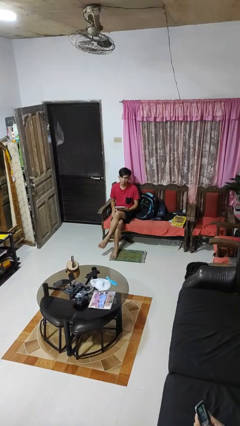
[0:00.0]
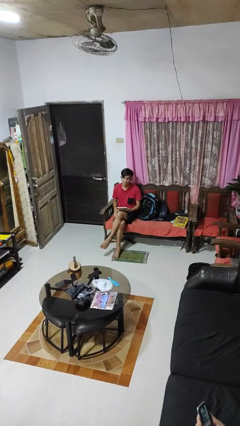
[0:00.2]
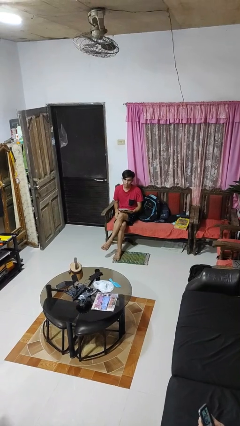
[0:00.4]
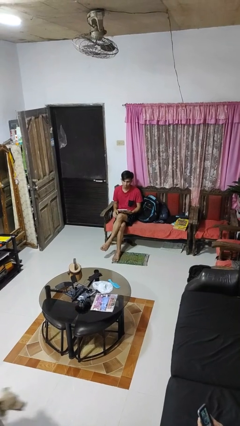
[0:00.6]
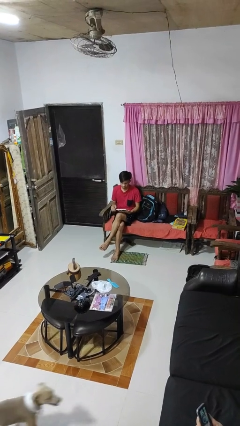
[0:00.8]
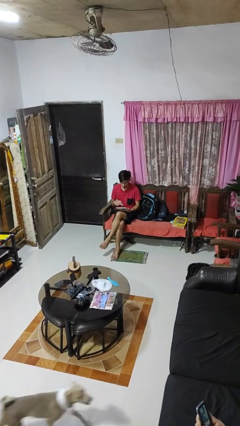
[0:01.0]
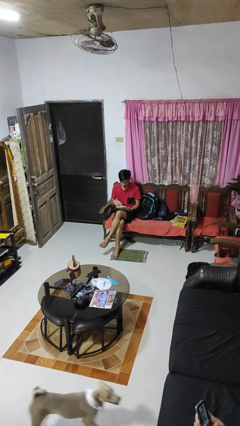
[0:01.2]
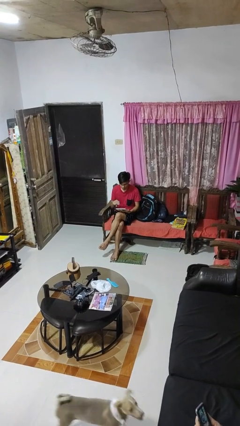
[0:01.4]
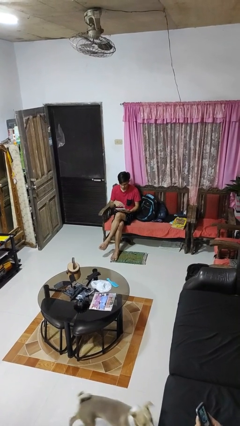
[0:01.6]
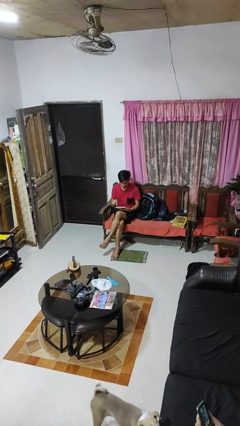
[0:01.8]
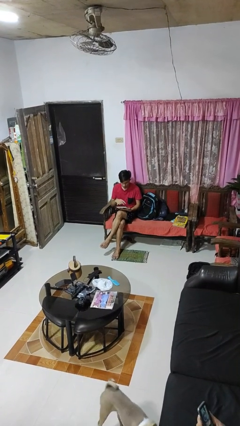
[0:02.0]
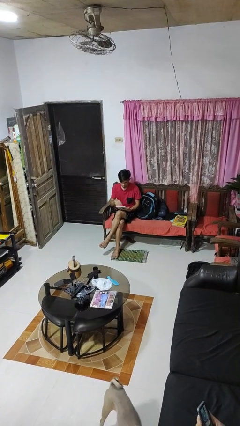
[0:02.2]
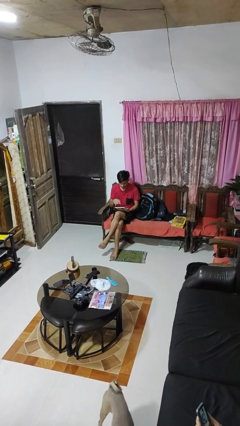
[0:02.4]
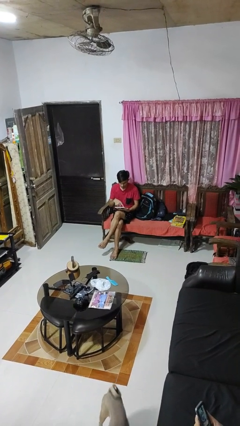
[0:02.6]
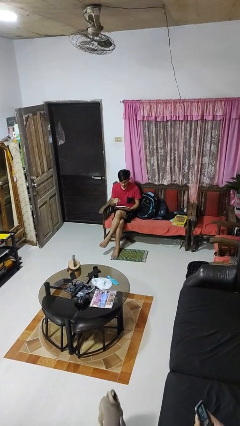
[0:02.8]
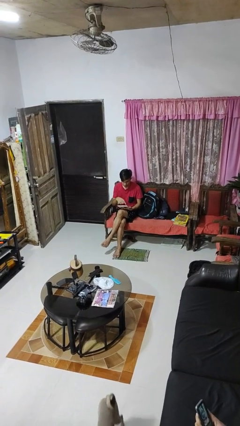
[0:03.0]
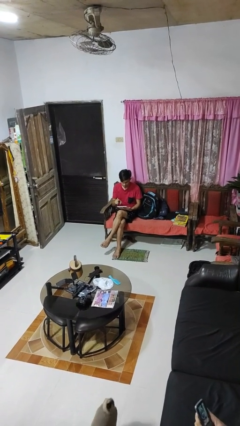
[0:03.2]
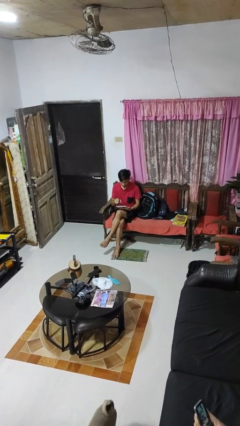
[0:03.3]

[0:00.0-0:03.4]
person interacts with tablet

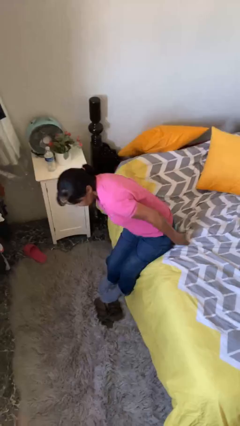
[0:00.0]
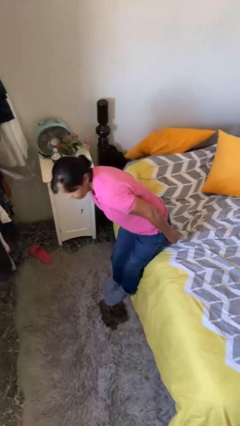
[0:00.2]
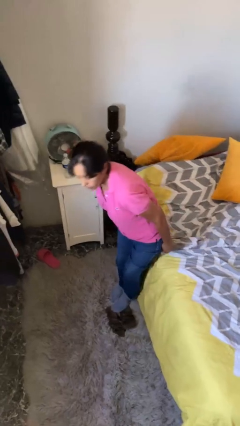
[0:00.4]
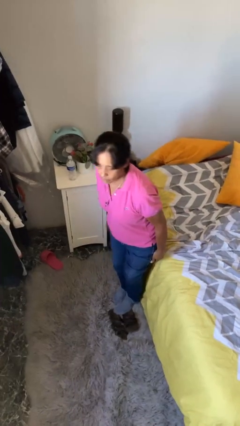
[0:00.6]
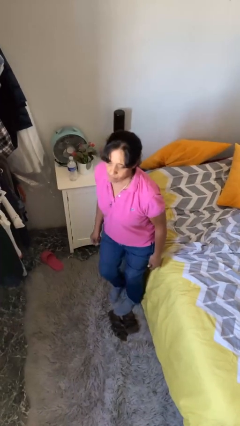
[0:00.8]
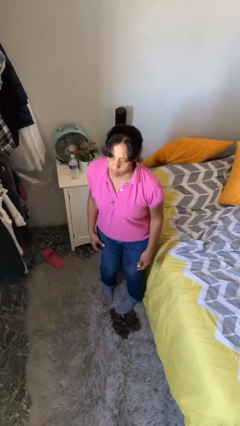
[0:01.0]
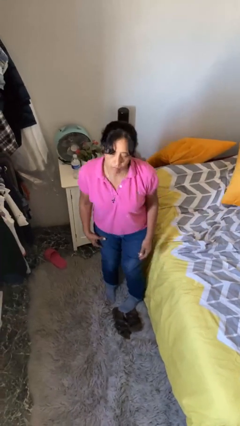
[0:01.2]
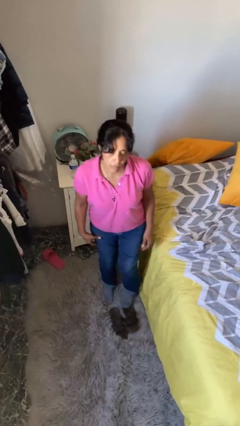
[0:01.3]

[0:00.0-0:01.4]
person stands up

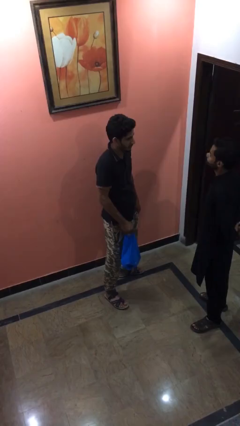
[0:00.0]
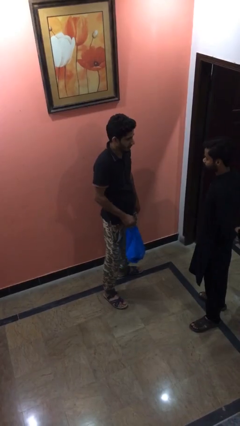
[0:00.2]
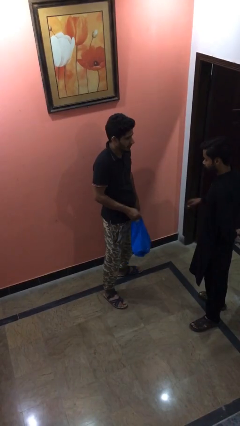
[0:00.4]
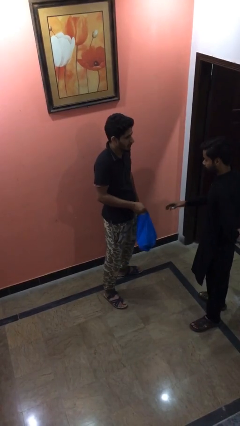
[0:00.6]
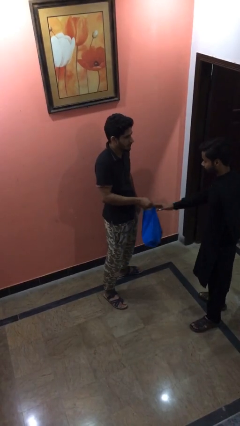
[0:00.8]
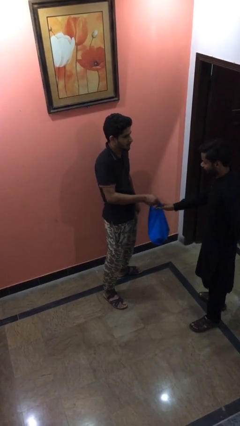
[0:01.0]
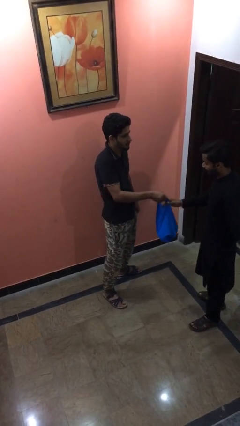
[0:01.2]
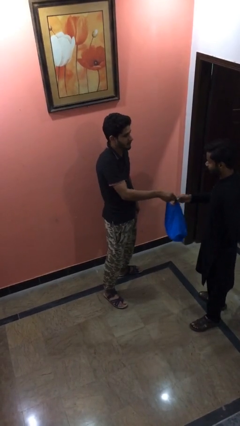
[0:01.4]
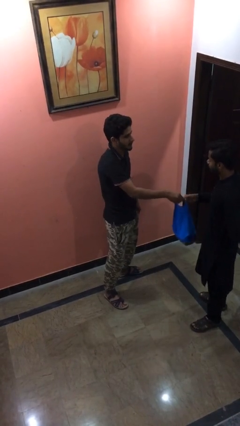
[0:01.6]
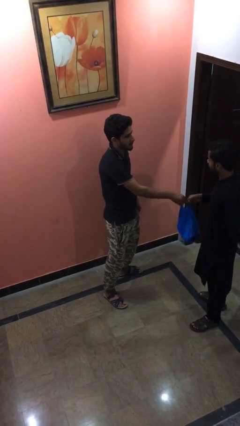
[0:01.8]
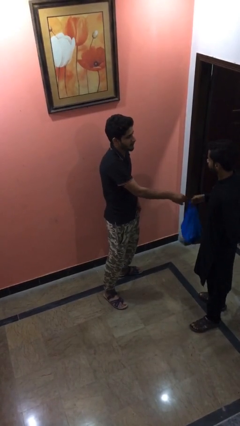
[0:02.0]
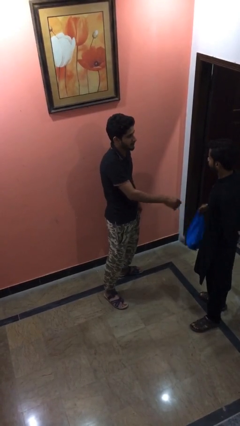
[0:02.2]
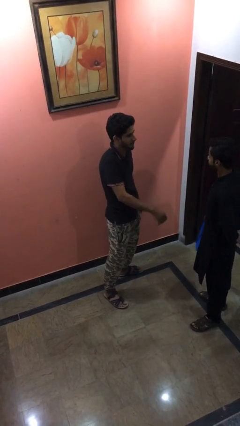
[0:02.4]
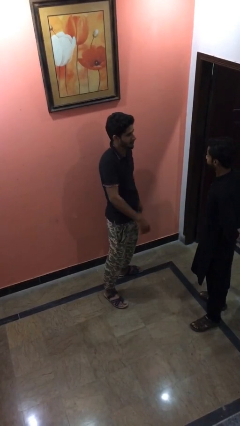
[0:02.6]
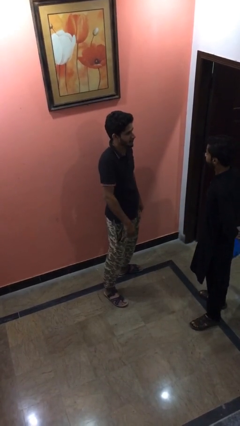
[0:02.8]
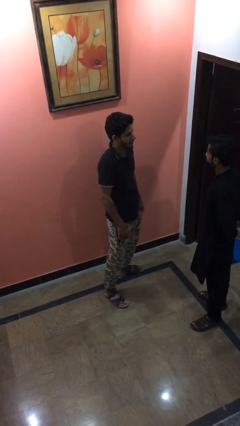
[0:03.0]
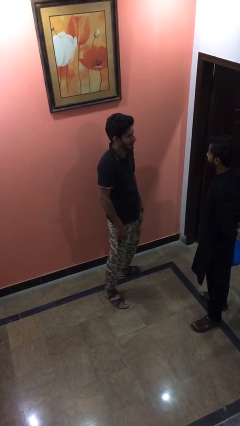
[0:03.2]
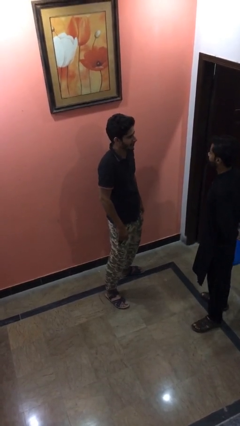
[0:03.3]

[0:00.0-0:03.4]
person transfers object to person

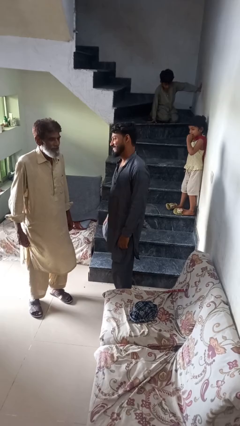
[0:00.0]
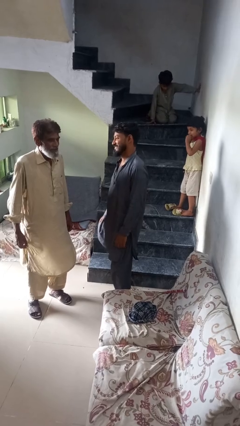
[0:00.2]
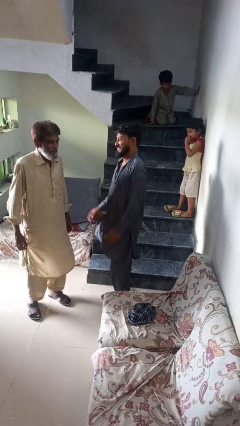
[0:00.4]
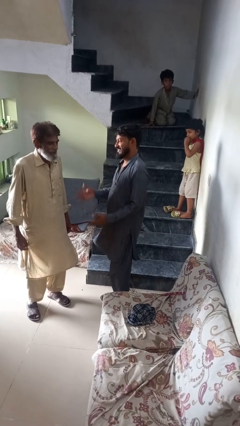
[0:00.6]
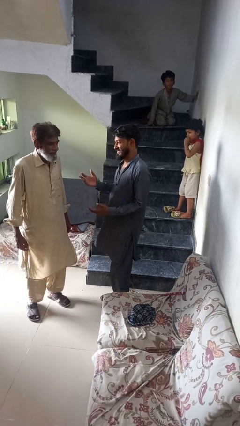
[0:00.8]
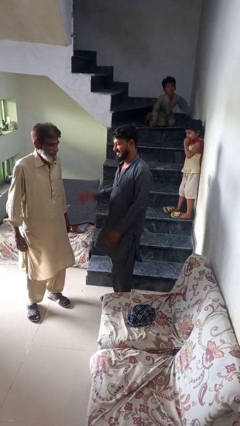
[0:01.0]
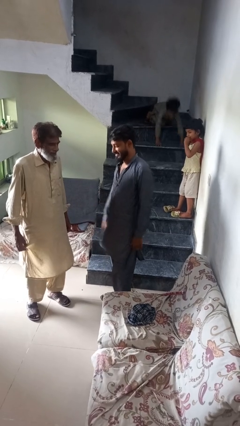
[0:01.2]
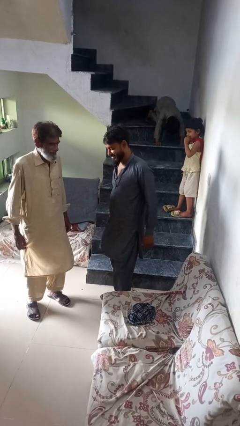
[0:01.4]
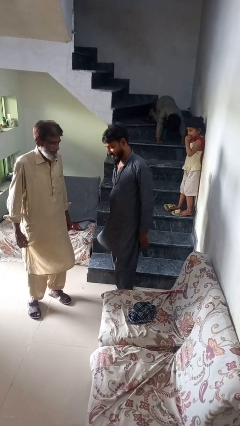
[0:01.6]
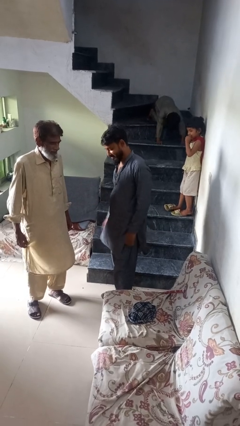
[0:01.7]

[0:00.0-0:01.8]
person laughs with person

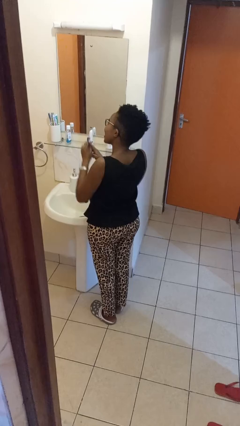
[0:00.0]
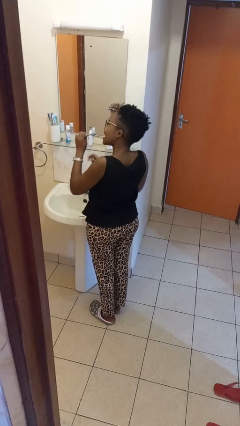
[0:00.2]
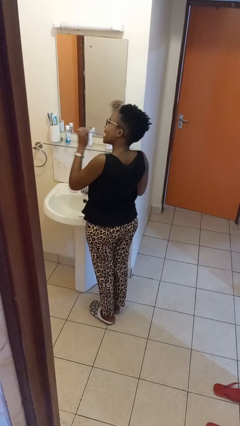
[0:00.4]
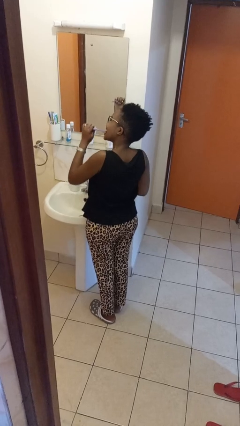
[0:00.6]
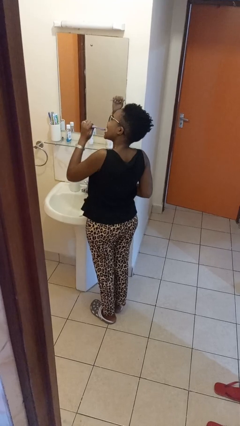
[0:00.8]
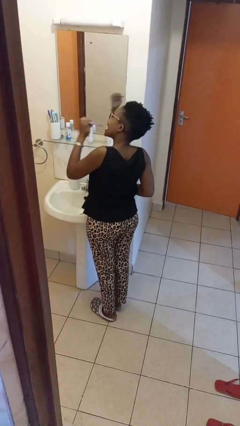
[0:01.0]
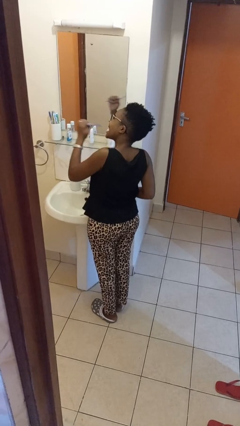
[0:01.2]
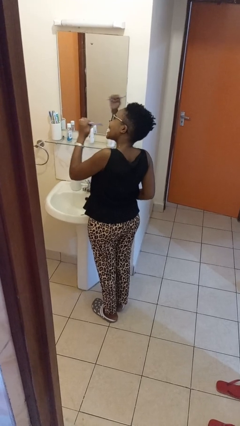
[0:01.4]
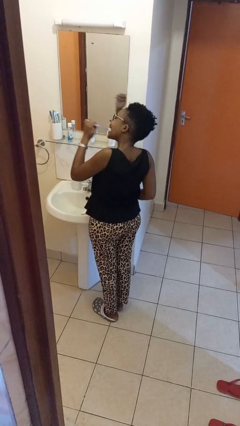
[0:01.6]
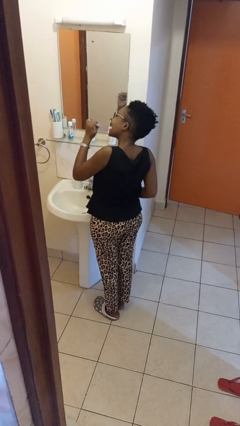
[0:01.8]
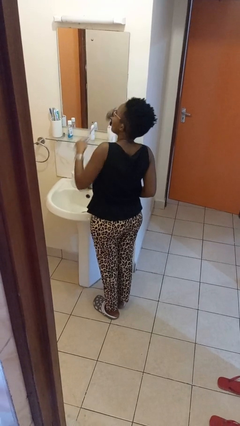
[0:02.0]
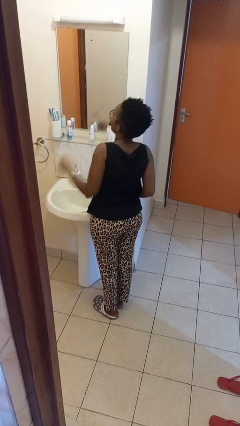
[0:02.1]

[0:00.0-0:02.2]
person brushes teeth

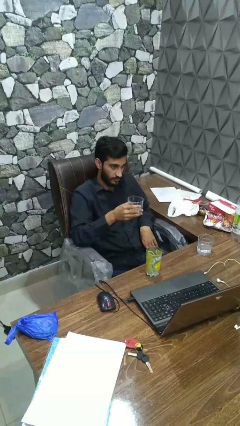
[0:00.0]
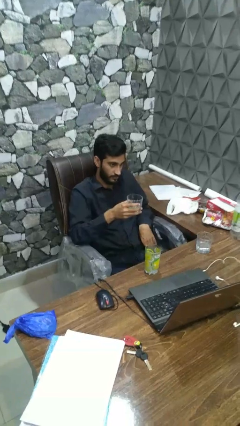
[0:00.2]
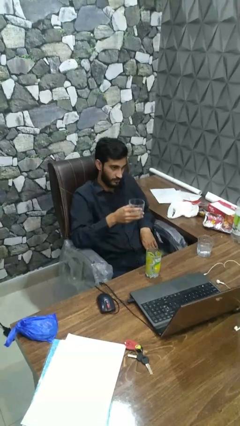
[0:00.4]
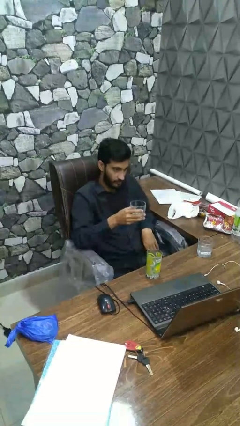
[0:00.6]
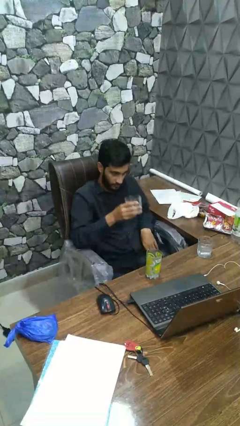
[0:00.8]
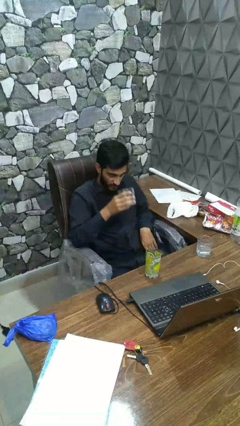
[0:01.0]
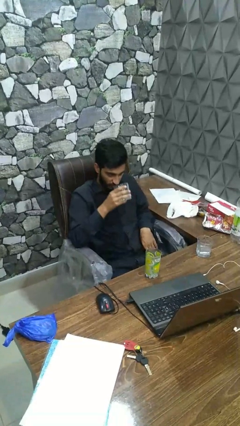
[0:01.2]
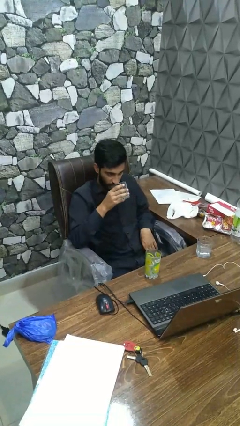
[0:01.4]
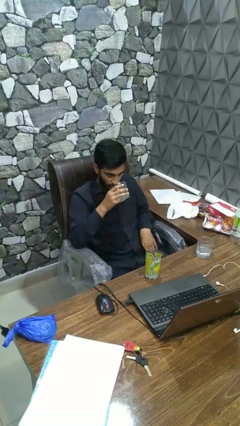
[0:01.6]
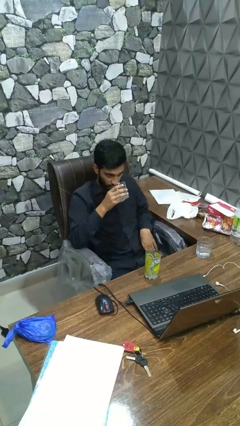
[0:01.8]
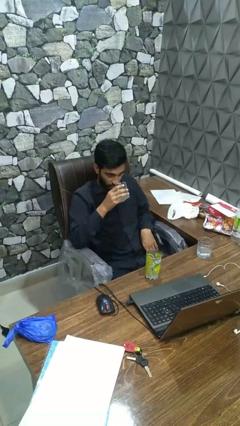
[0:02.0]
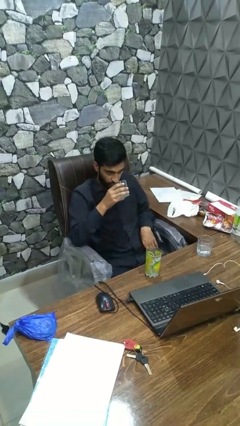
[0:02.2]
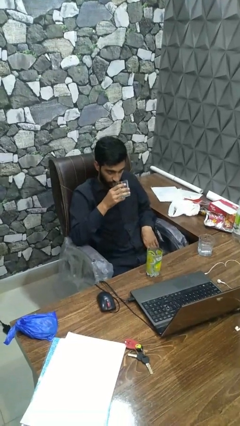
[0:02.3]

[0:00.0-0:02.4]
person drinks from shotglass

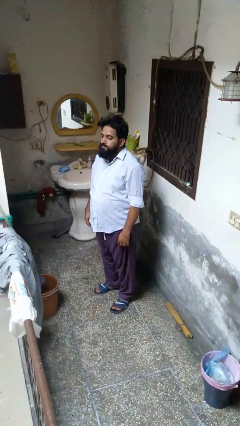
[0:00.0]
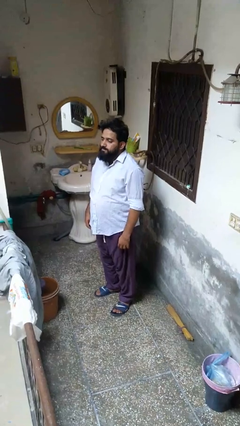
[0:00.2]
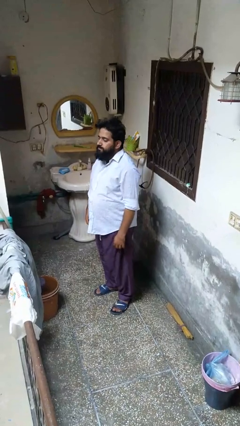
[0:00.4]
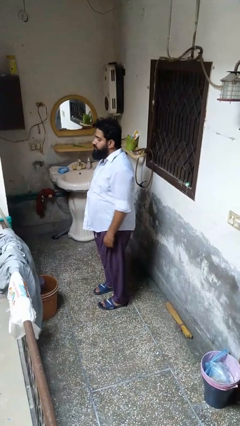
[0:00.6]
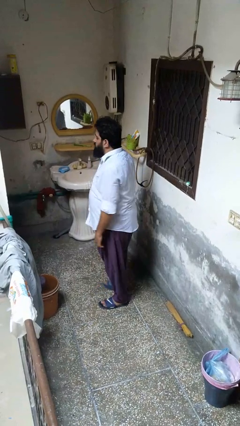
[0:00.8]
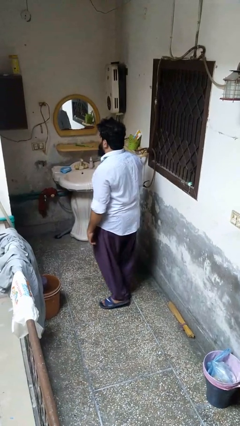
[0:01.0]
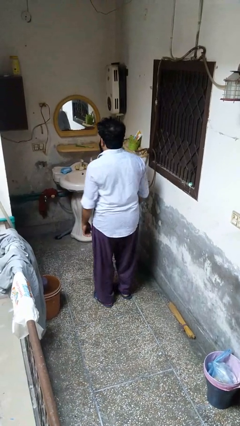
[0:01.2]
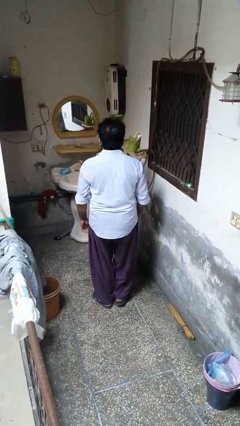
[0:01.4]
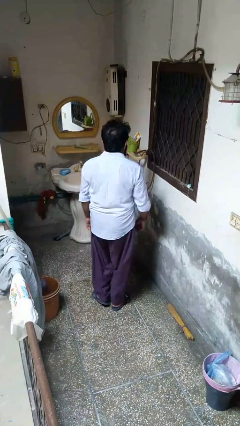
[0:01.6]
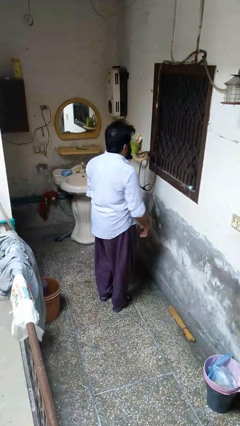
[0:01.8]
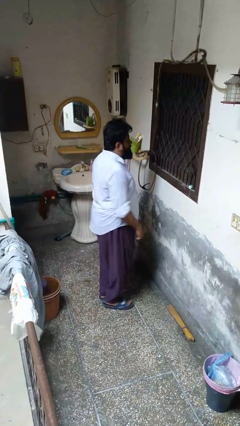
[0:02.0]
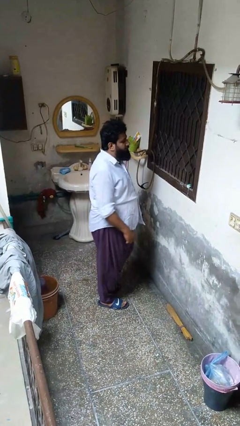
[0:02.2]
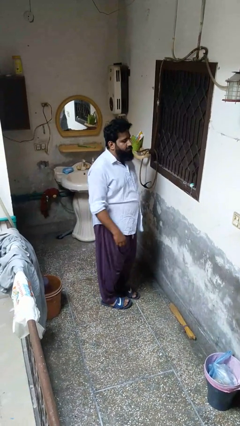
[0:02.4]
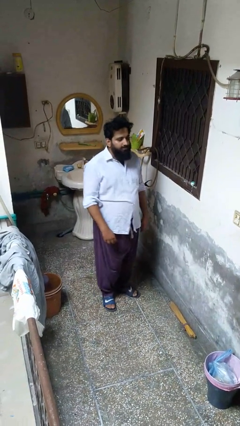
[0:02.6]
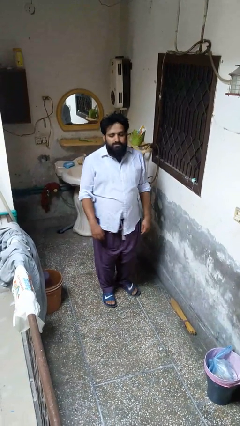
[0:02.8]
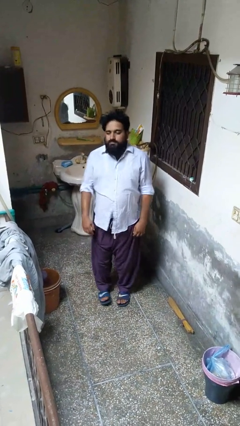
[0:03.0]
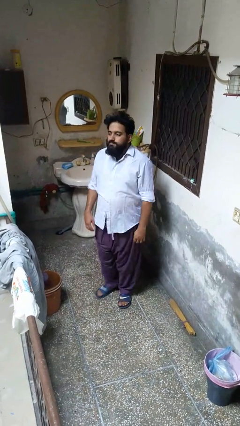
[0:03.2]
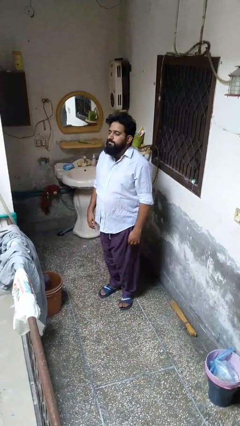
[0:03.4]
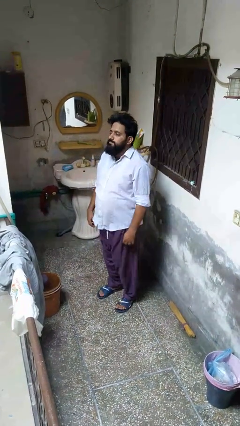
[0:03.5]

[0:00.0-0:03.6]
person twirls
